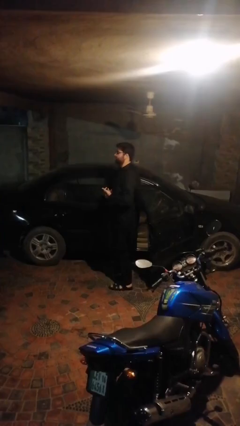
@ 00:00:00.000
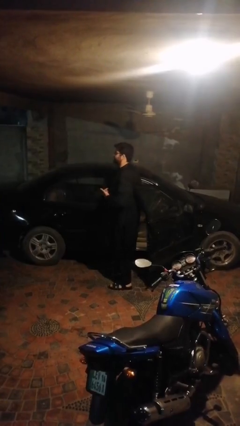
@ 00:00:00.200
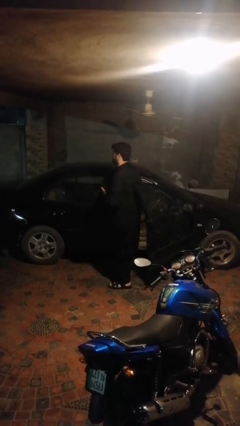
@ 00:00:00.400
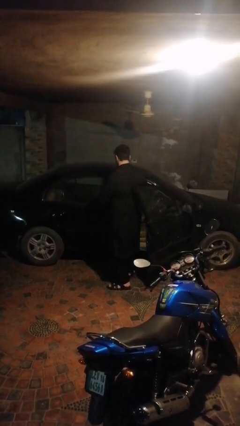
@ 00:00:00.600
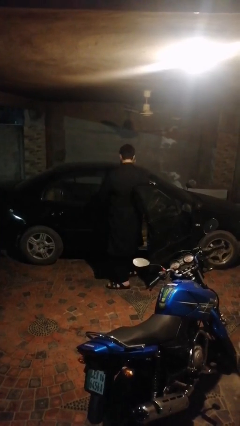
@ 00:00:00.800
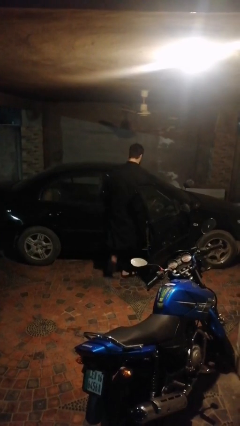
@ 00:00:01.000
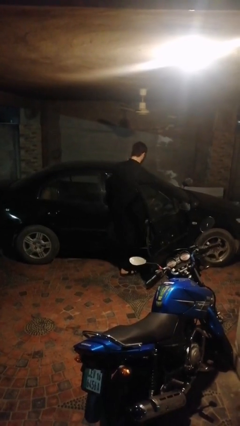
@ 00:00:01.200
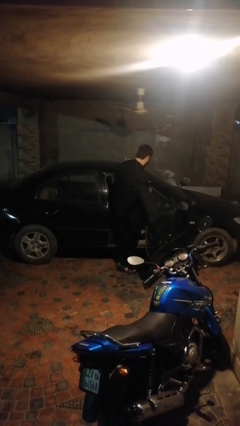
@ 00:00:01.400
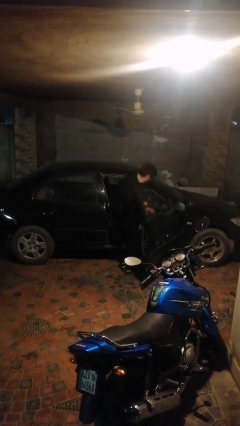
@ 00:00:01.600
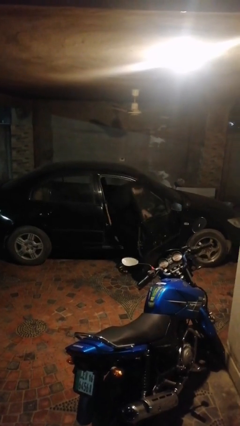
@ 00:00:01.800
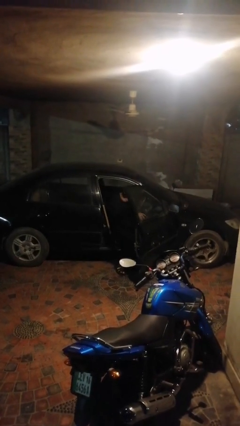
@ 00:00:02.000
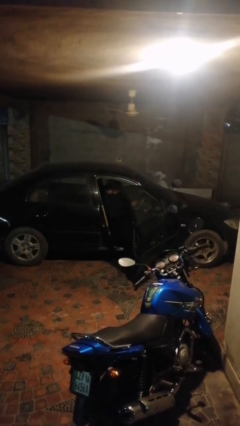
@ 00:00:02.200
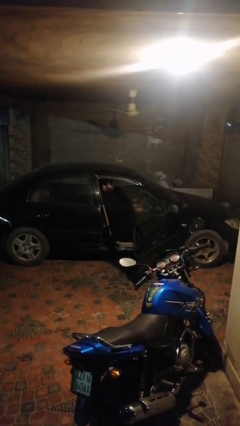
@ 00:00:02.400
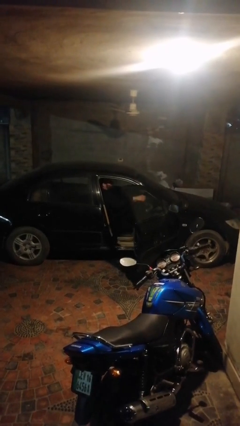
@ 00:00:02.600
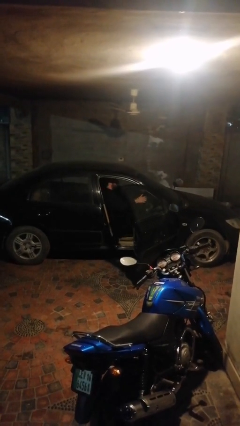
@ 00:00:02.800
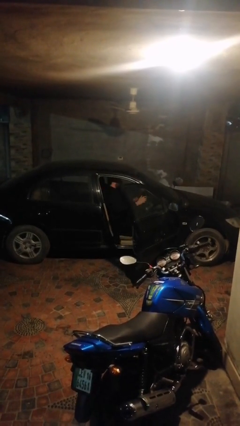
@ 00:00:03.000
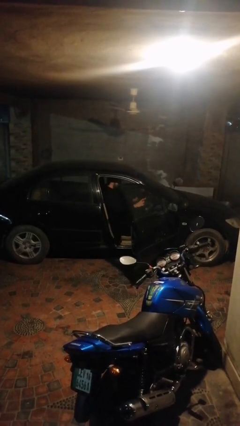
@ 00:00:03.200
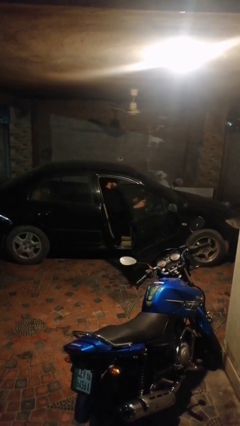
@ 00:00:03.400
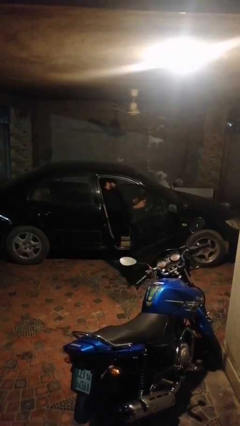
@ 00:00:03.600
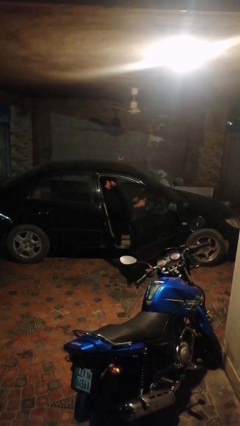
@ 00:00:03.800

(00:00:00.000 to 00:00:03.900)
person enters car

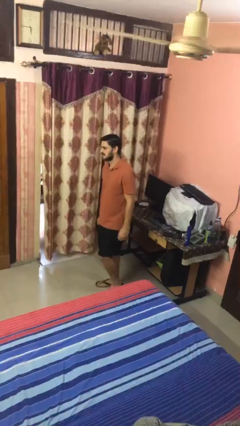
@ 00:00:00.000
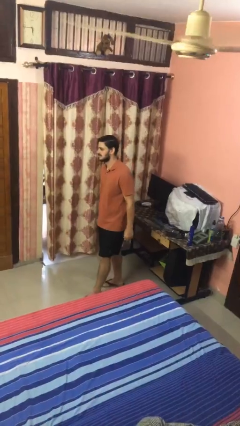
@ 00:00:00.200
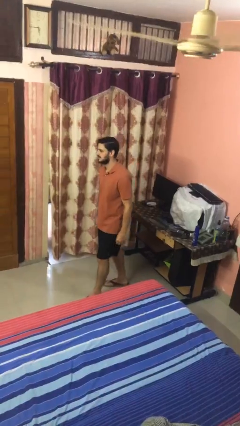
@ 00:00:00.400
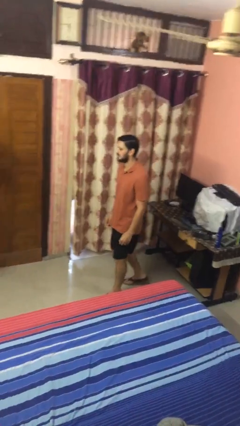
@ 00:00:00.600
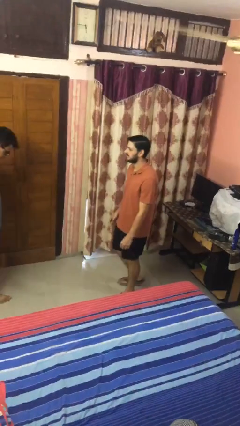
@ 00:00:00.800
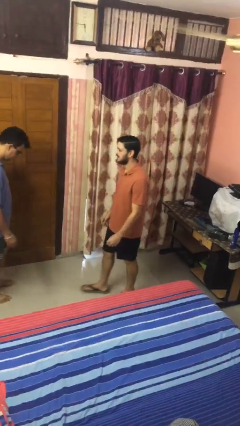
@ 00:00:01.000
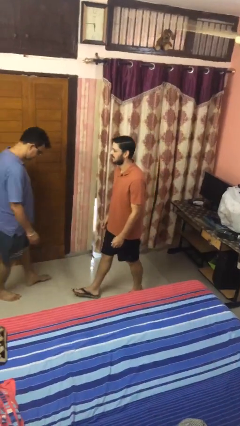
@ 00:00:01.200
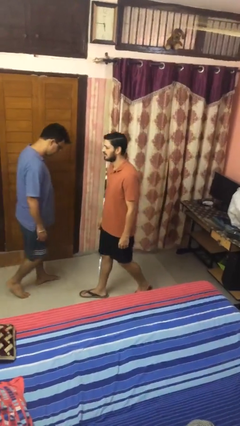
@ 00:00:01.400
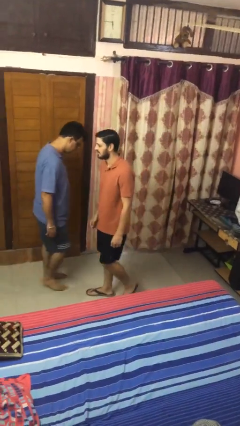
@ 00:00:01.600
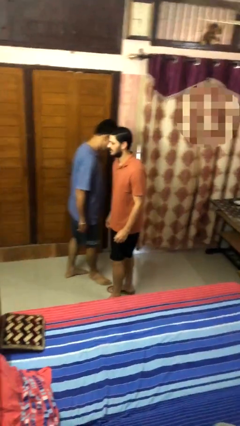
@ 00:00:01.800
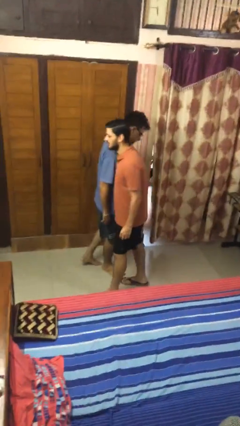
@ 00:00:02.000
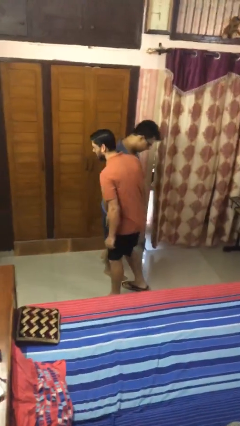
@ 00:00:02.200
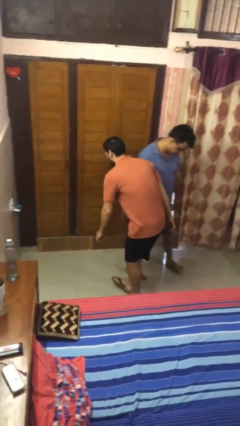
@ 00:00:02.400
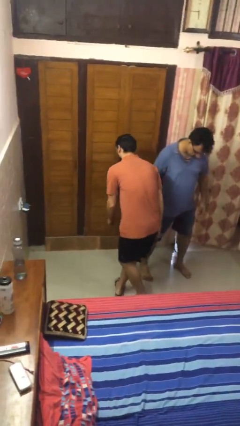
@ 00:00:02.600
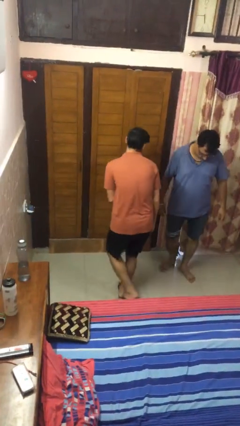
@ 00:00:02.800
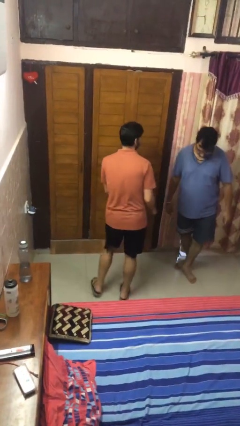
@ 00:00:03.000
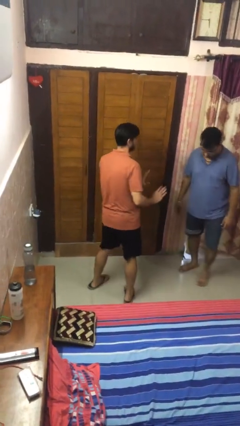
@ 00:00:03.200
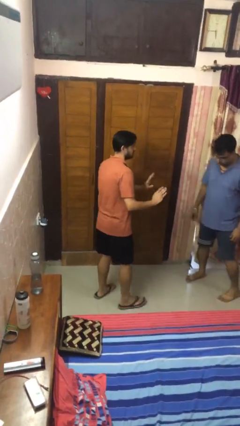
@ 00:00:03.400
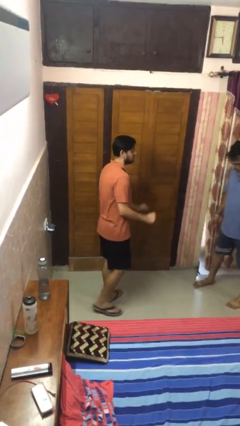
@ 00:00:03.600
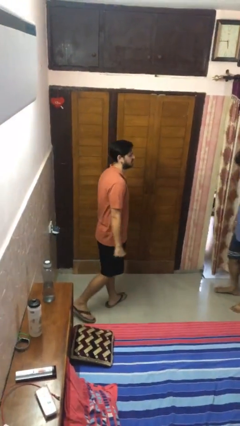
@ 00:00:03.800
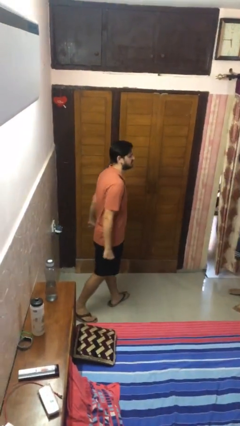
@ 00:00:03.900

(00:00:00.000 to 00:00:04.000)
person bumps into person

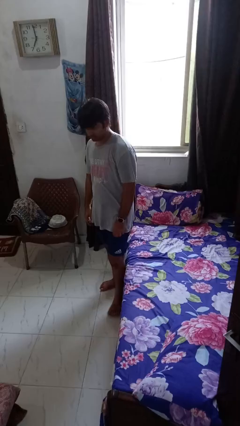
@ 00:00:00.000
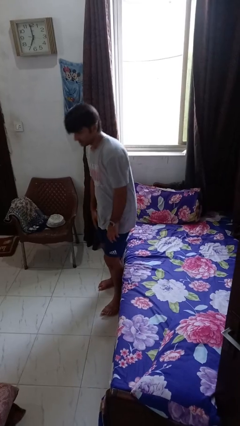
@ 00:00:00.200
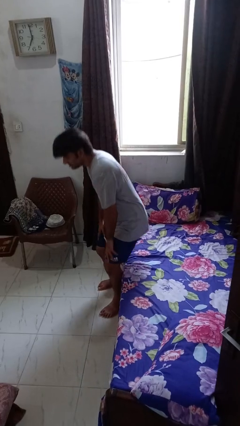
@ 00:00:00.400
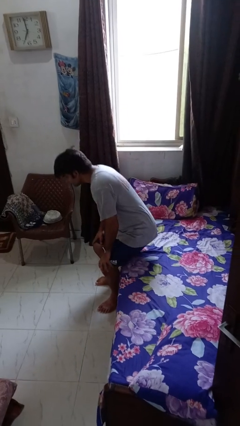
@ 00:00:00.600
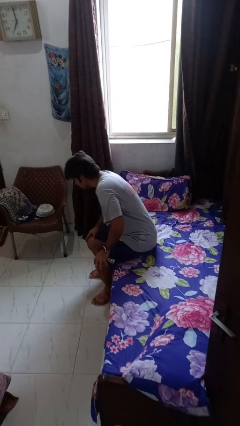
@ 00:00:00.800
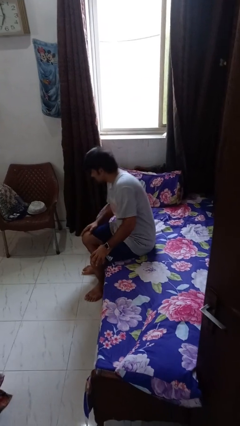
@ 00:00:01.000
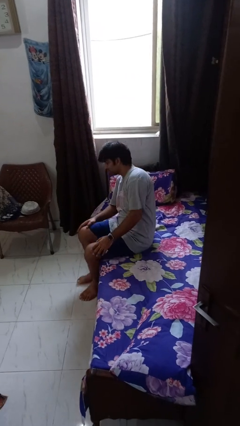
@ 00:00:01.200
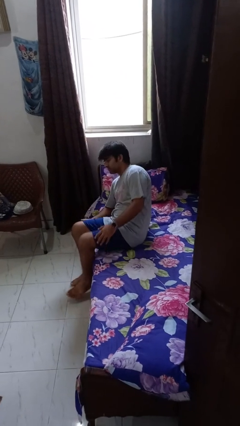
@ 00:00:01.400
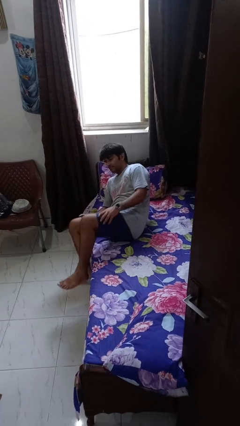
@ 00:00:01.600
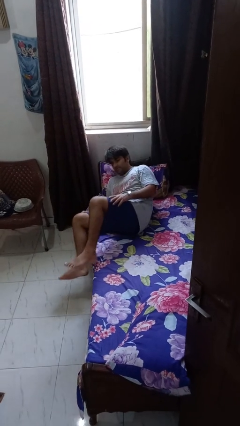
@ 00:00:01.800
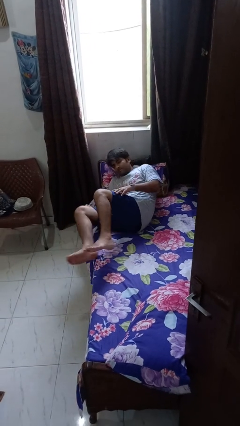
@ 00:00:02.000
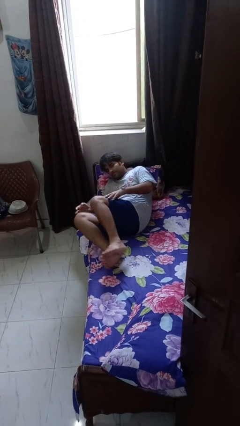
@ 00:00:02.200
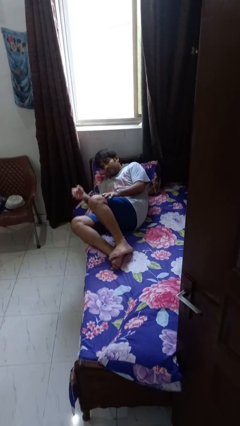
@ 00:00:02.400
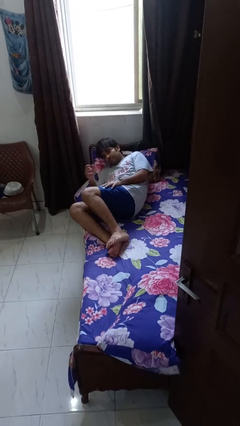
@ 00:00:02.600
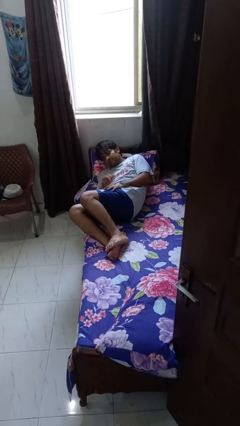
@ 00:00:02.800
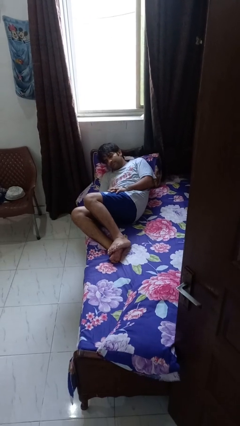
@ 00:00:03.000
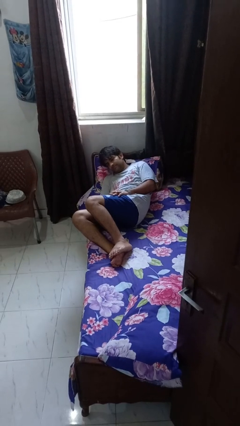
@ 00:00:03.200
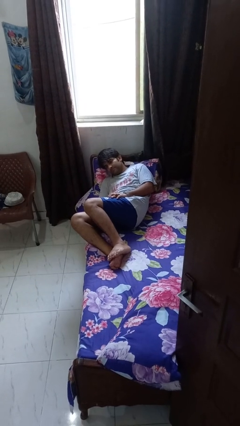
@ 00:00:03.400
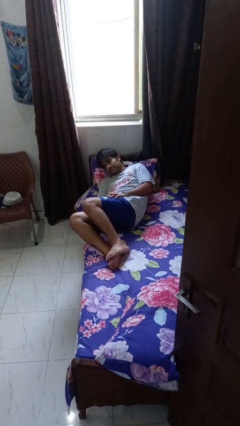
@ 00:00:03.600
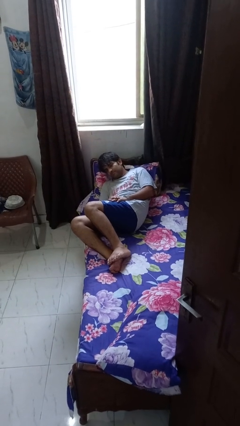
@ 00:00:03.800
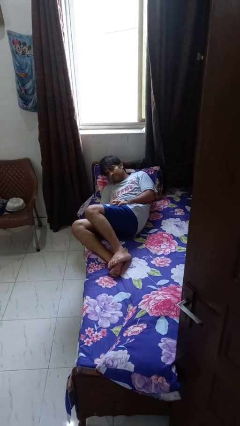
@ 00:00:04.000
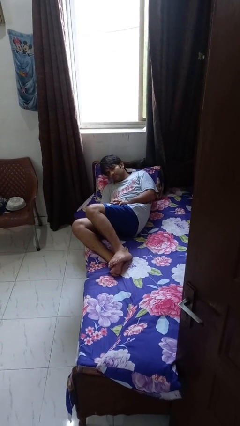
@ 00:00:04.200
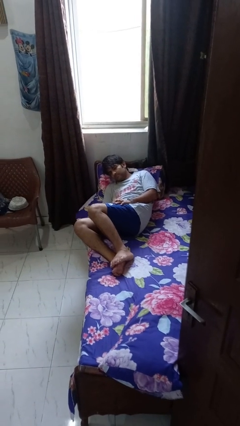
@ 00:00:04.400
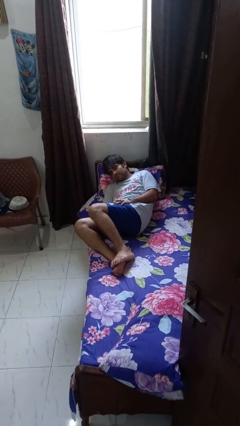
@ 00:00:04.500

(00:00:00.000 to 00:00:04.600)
person lies down on bed

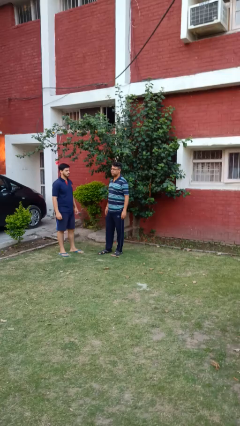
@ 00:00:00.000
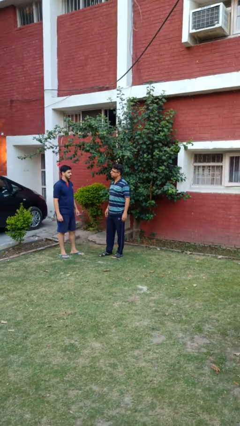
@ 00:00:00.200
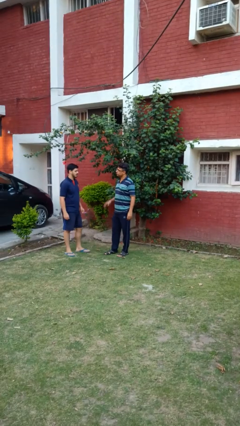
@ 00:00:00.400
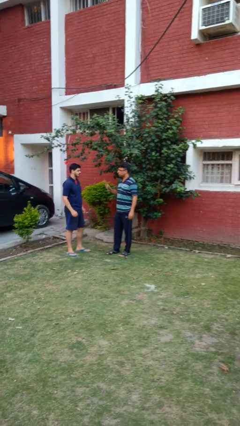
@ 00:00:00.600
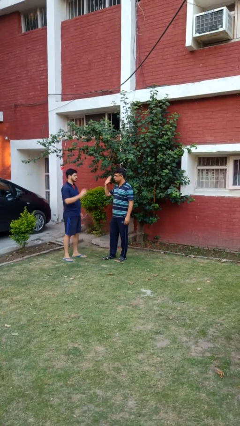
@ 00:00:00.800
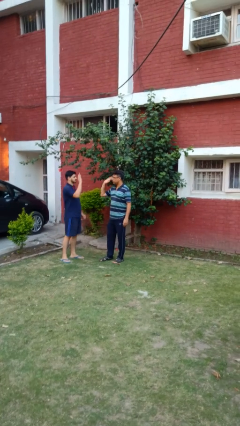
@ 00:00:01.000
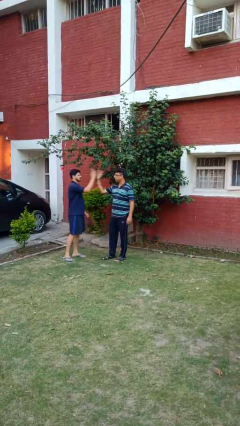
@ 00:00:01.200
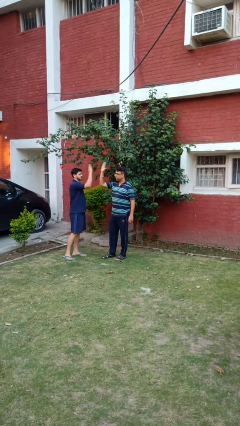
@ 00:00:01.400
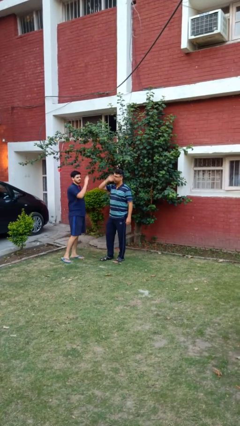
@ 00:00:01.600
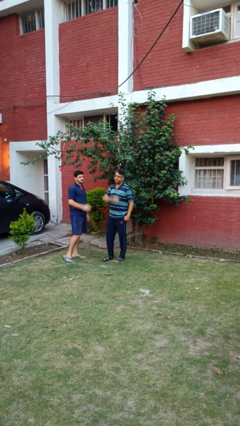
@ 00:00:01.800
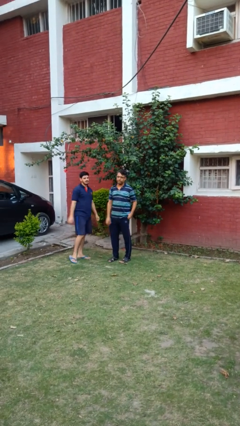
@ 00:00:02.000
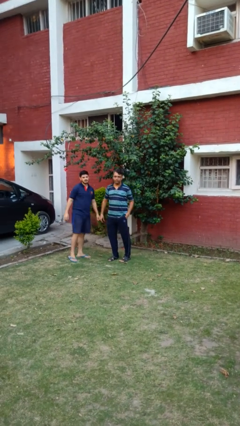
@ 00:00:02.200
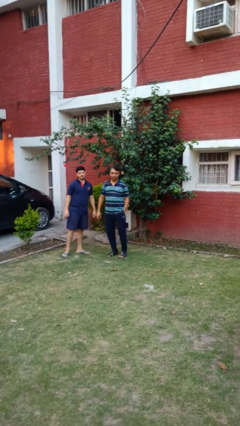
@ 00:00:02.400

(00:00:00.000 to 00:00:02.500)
person highfives hand

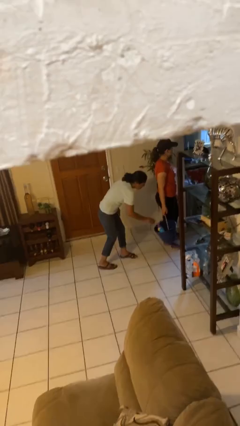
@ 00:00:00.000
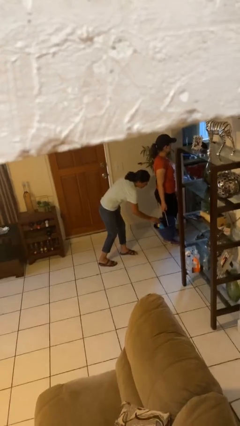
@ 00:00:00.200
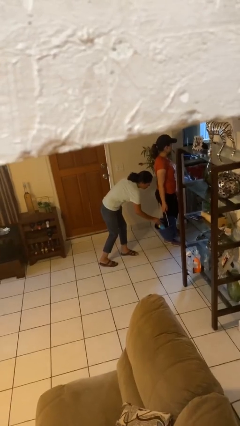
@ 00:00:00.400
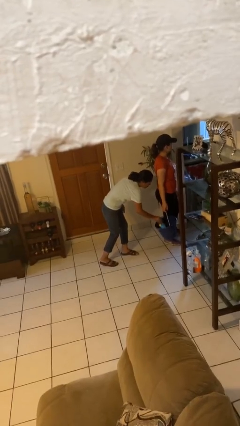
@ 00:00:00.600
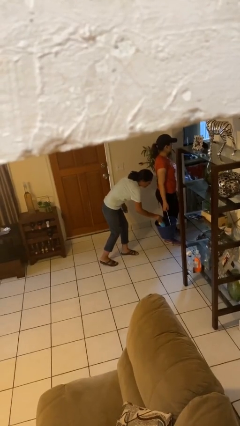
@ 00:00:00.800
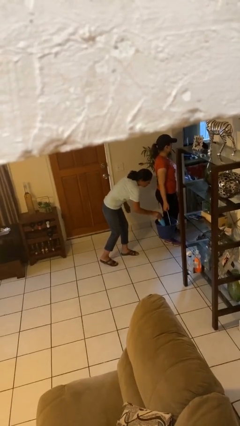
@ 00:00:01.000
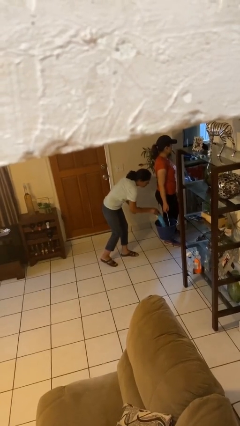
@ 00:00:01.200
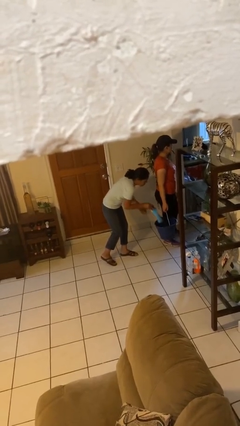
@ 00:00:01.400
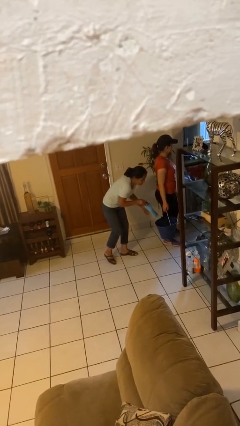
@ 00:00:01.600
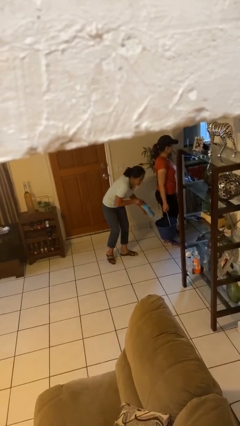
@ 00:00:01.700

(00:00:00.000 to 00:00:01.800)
person steals object from person

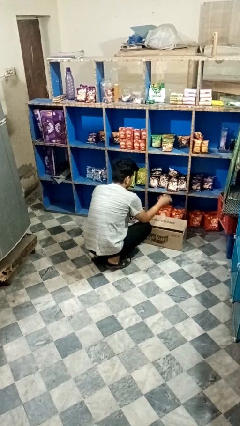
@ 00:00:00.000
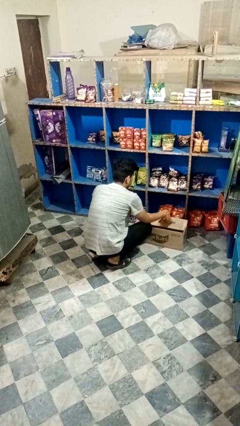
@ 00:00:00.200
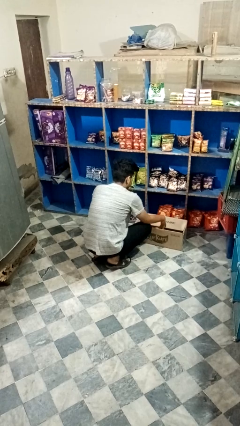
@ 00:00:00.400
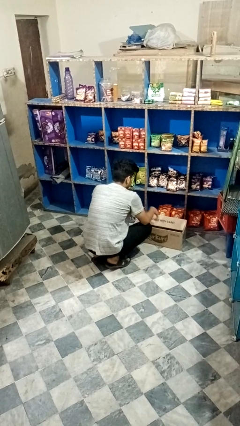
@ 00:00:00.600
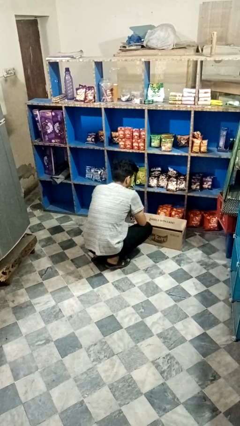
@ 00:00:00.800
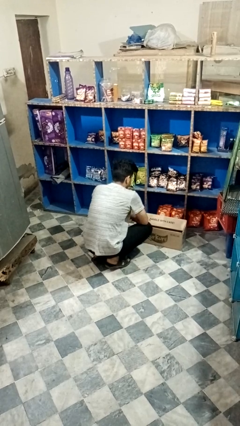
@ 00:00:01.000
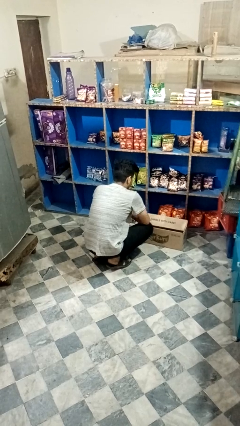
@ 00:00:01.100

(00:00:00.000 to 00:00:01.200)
person puts object into box
